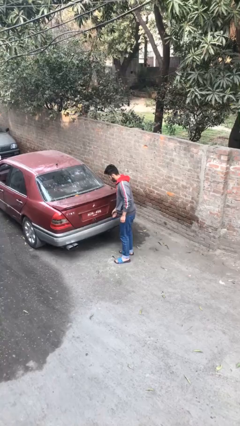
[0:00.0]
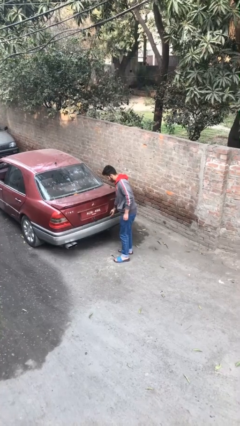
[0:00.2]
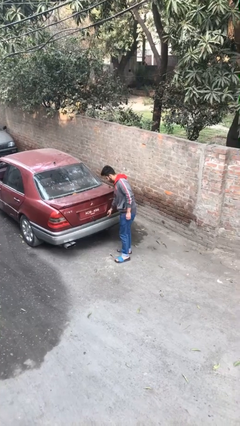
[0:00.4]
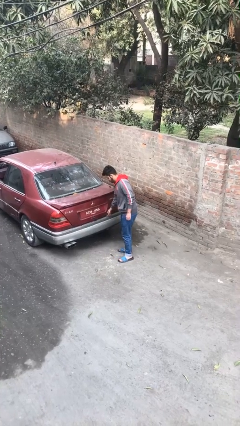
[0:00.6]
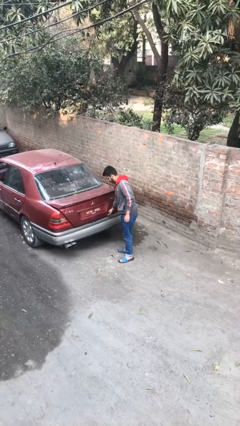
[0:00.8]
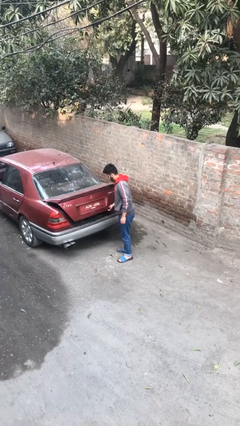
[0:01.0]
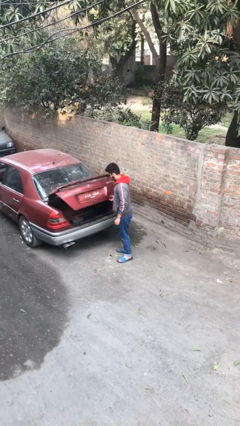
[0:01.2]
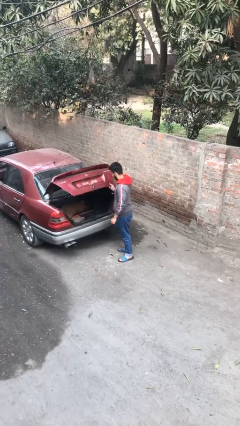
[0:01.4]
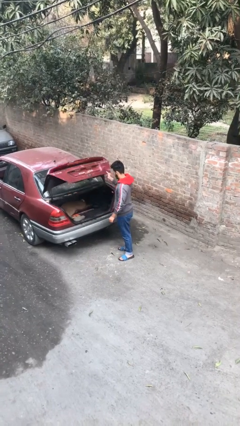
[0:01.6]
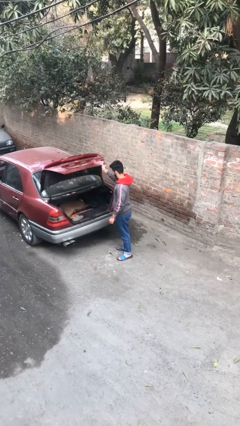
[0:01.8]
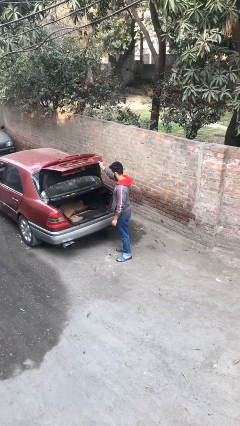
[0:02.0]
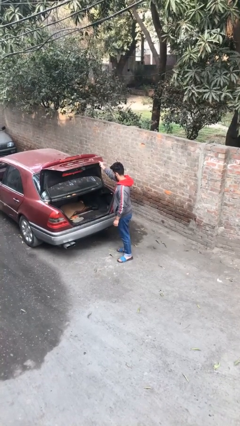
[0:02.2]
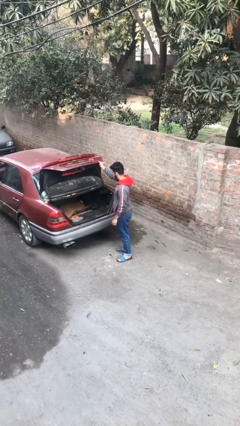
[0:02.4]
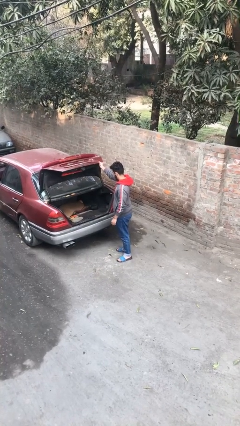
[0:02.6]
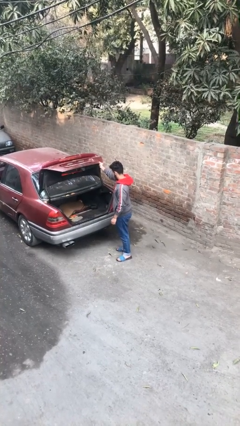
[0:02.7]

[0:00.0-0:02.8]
person opens car trunk

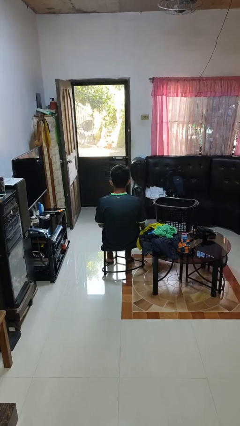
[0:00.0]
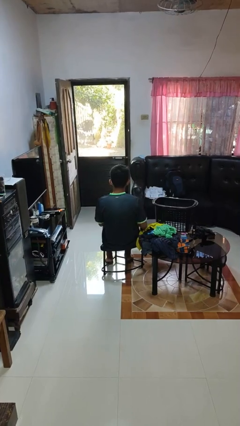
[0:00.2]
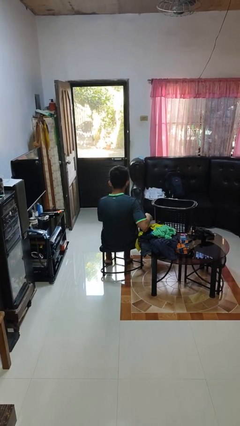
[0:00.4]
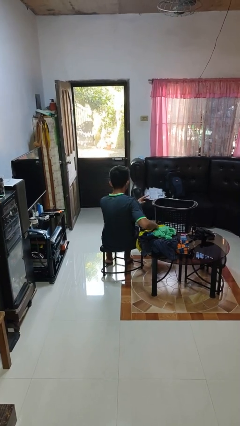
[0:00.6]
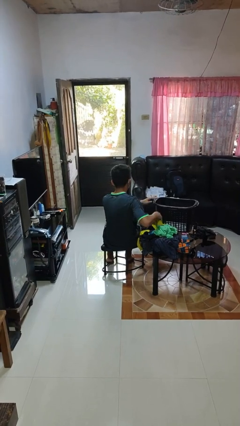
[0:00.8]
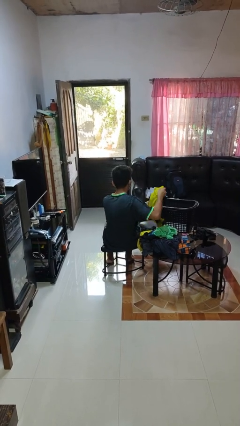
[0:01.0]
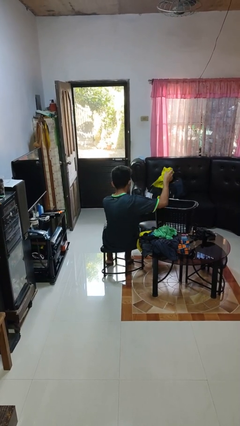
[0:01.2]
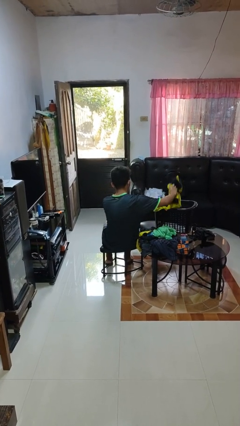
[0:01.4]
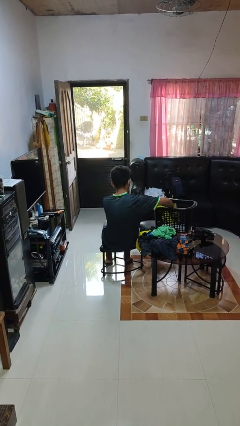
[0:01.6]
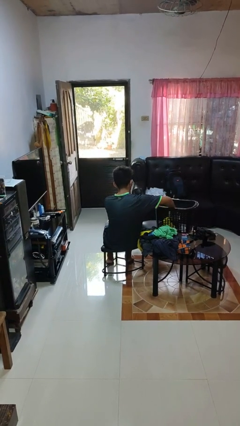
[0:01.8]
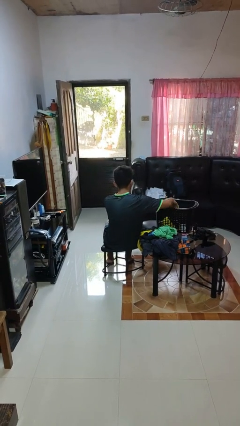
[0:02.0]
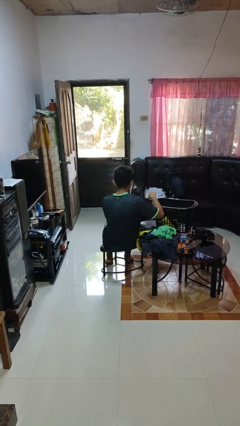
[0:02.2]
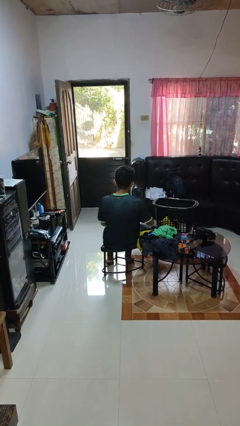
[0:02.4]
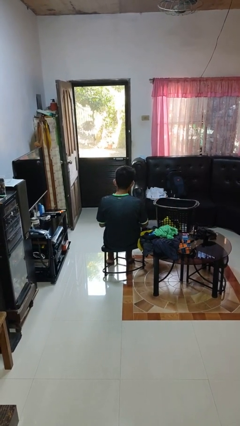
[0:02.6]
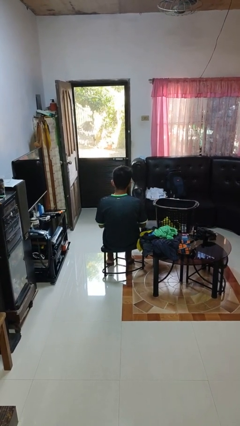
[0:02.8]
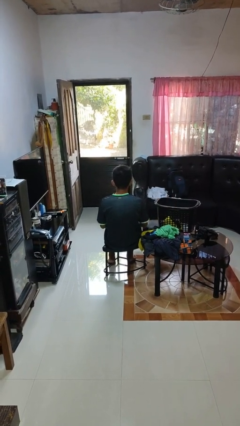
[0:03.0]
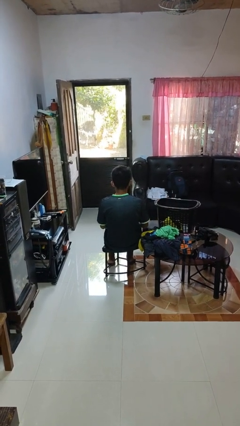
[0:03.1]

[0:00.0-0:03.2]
person puts object into basket

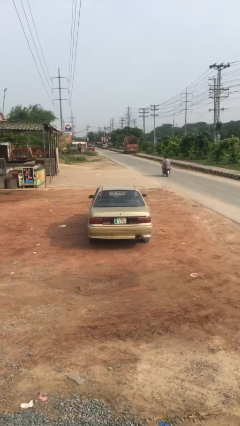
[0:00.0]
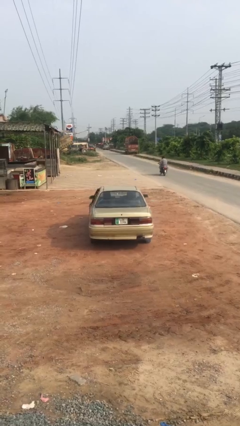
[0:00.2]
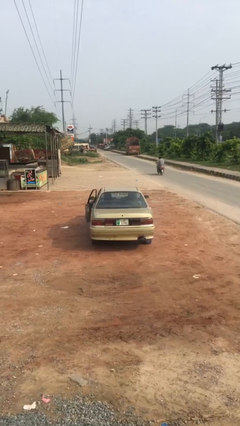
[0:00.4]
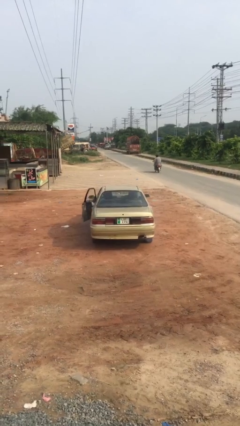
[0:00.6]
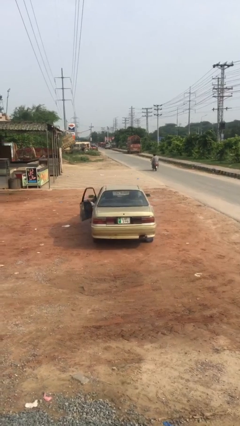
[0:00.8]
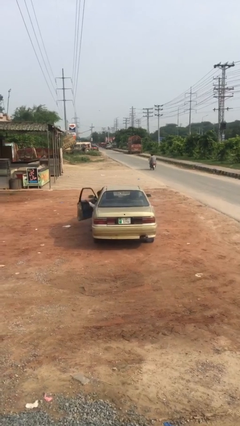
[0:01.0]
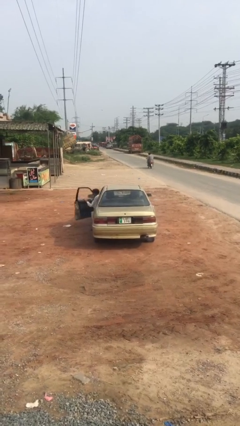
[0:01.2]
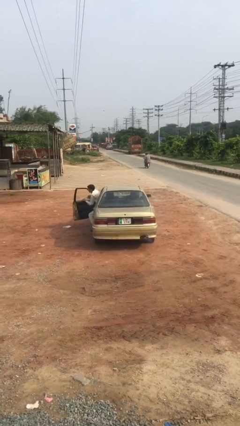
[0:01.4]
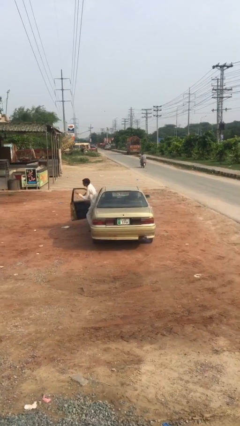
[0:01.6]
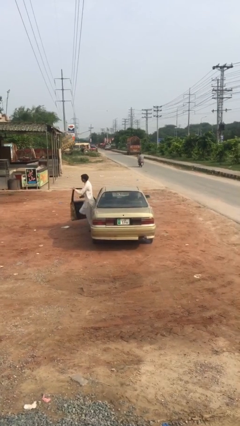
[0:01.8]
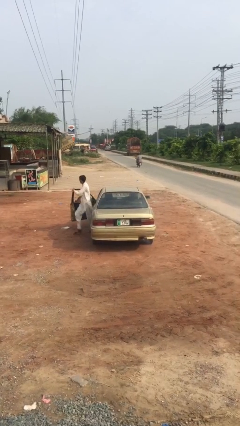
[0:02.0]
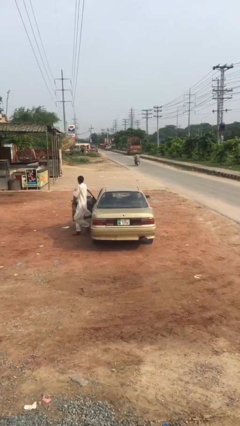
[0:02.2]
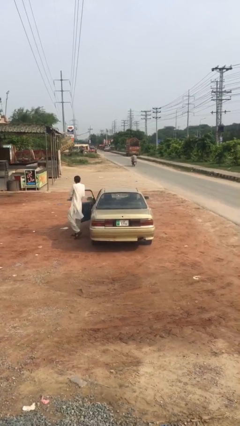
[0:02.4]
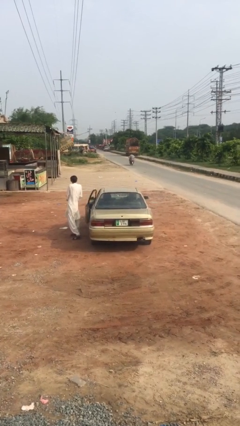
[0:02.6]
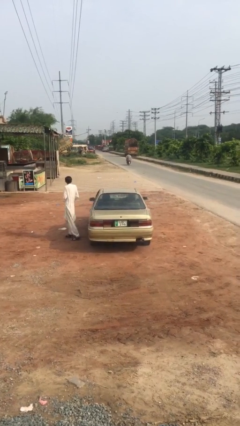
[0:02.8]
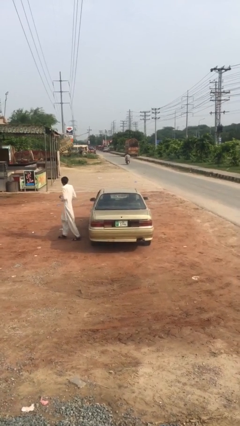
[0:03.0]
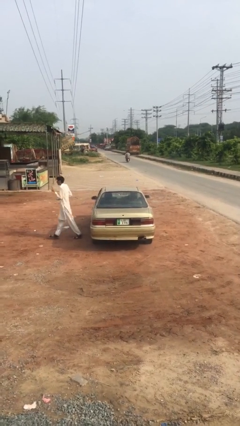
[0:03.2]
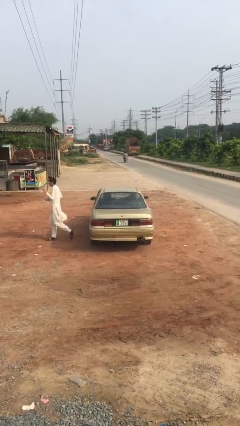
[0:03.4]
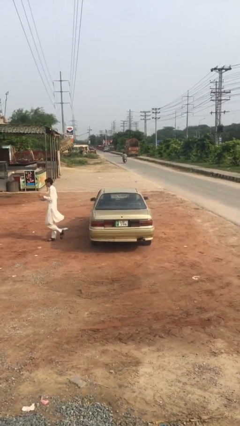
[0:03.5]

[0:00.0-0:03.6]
car drops off person

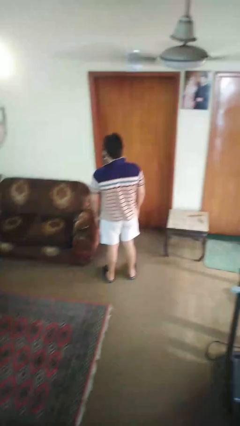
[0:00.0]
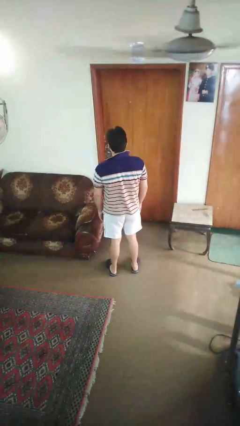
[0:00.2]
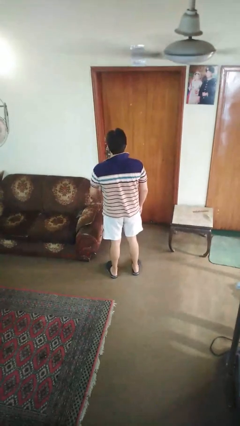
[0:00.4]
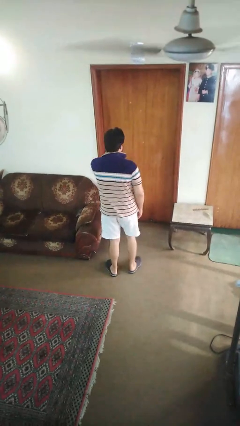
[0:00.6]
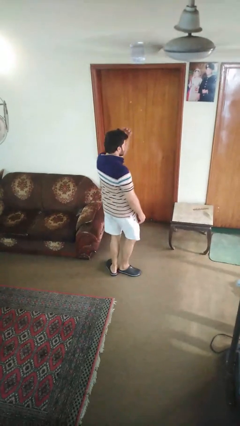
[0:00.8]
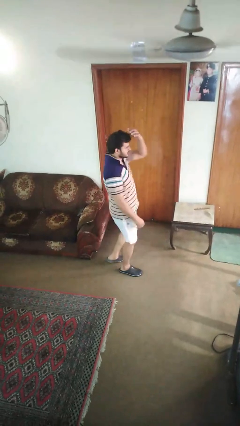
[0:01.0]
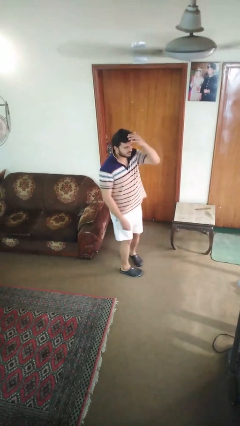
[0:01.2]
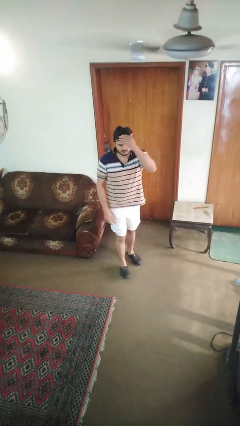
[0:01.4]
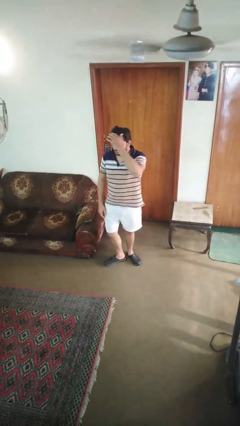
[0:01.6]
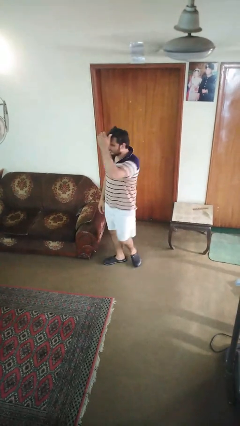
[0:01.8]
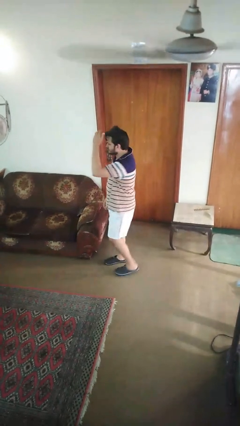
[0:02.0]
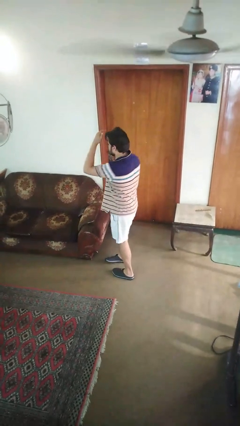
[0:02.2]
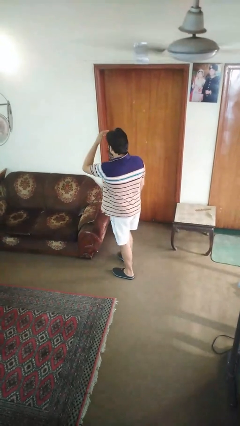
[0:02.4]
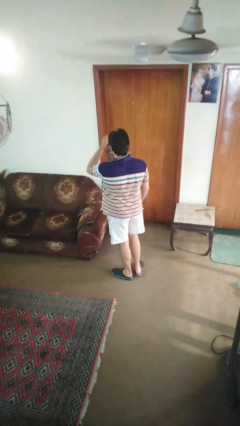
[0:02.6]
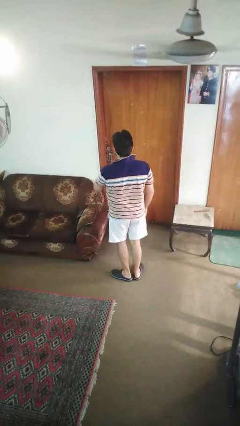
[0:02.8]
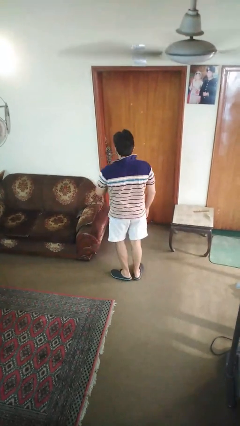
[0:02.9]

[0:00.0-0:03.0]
person twirls

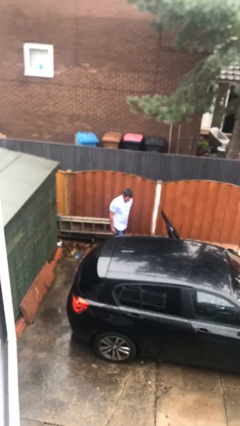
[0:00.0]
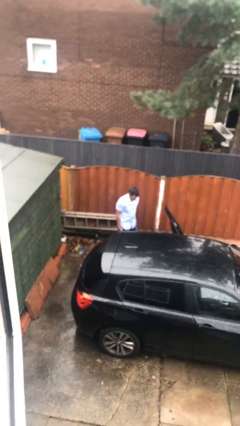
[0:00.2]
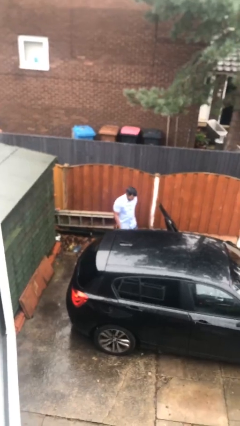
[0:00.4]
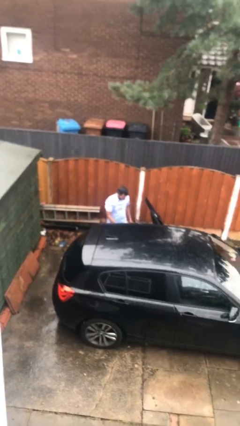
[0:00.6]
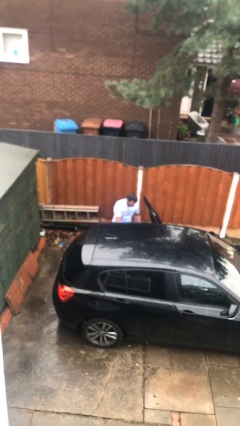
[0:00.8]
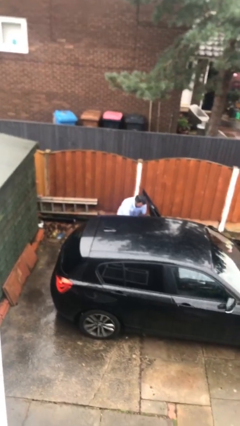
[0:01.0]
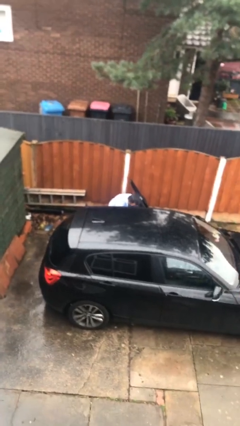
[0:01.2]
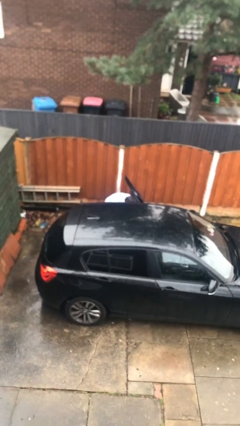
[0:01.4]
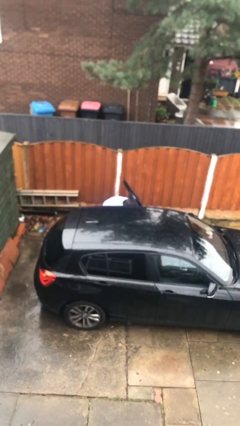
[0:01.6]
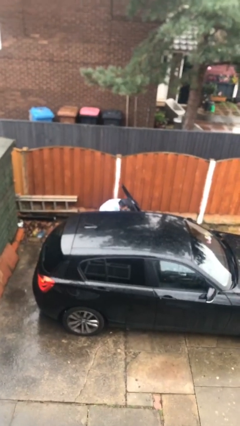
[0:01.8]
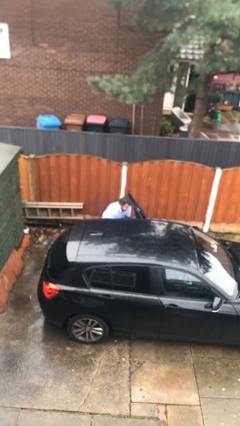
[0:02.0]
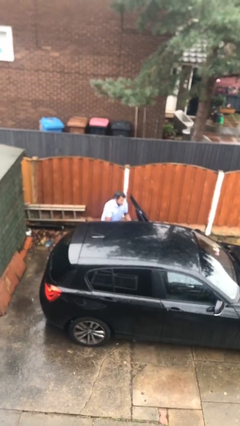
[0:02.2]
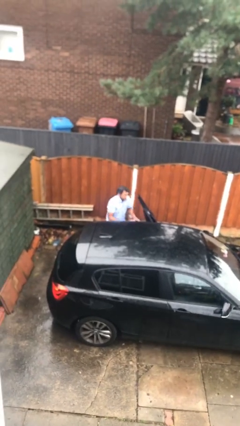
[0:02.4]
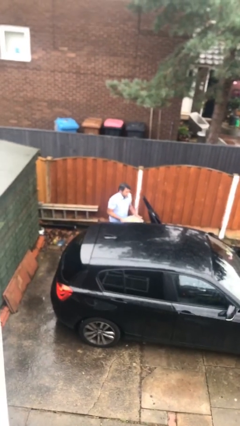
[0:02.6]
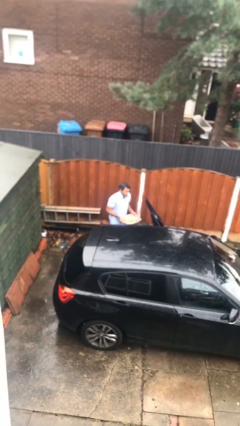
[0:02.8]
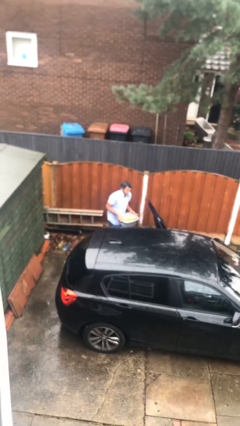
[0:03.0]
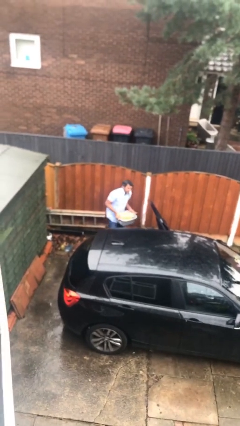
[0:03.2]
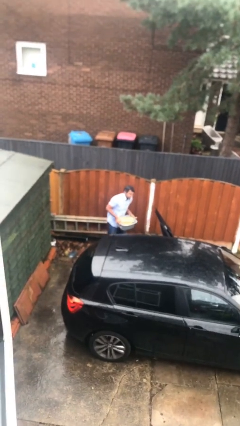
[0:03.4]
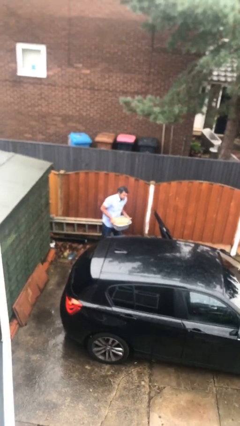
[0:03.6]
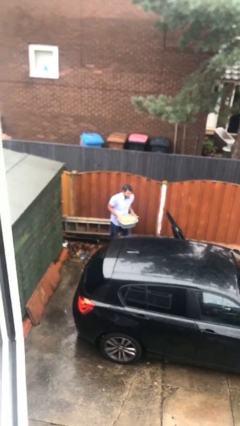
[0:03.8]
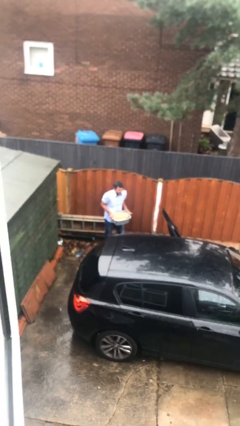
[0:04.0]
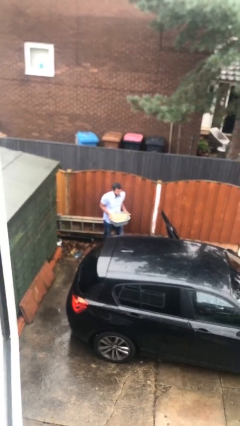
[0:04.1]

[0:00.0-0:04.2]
person unloads car

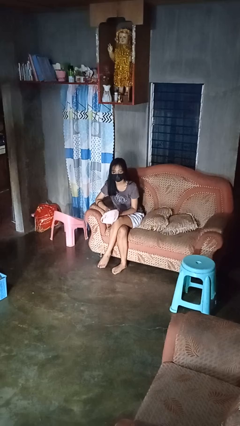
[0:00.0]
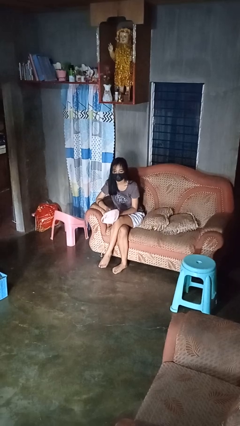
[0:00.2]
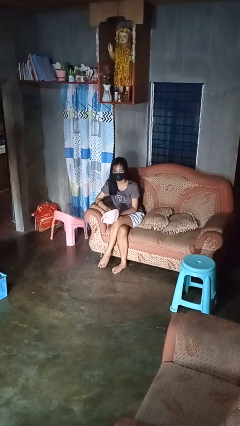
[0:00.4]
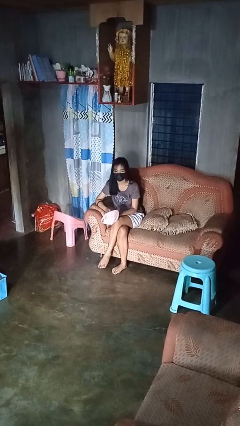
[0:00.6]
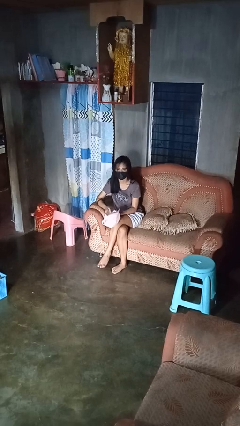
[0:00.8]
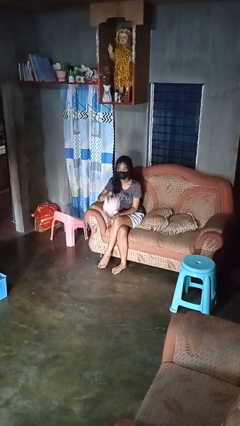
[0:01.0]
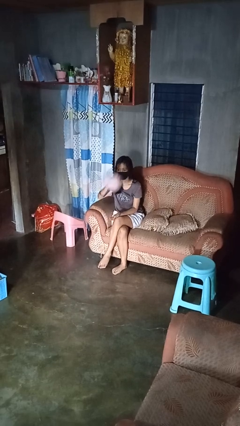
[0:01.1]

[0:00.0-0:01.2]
person puts on hat
